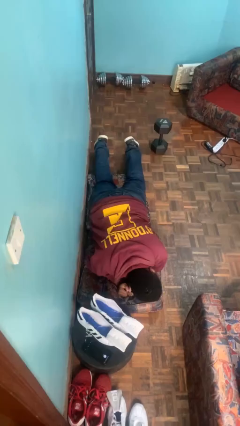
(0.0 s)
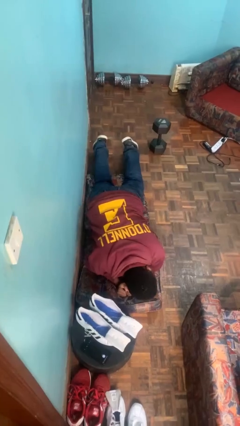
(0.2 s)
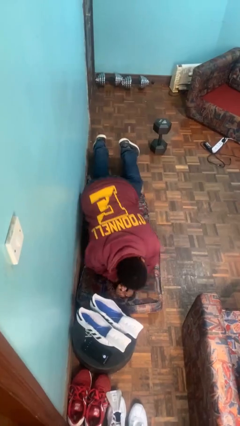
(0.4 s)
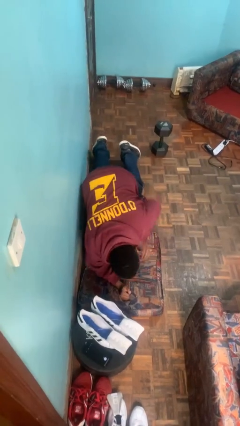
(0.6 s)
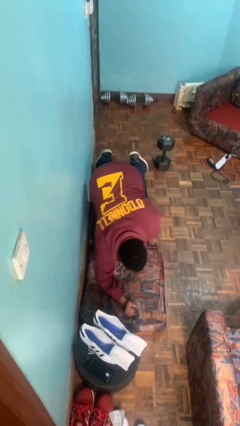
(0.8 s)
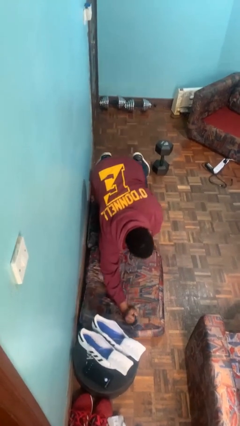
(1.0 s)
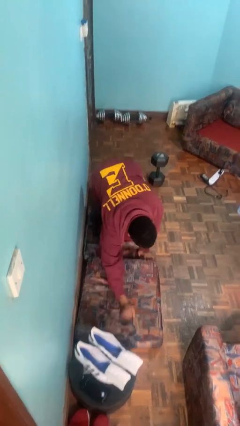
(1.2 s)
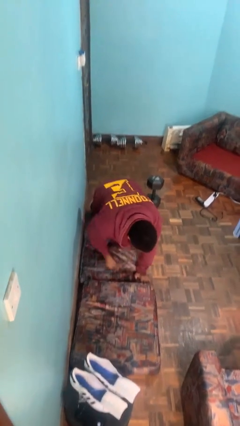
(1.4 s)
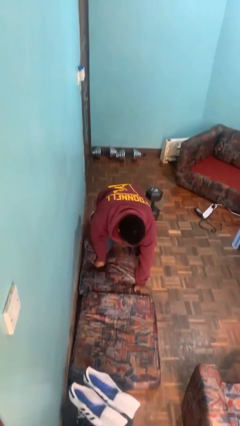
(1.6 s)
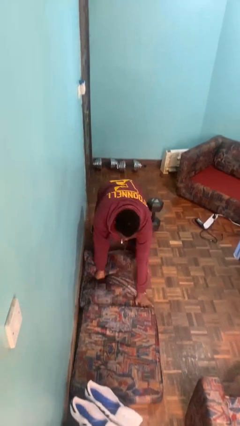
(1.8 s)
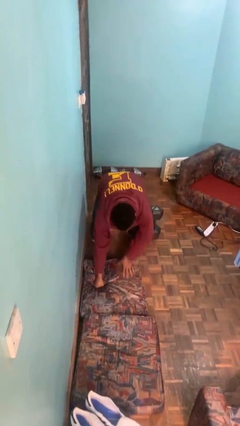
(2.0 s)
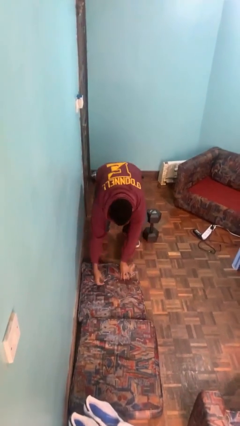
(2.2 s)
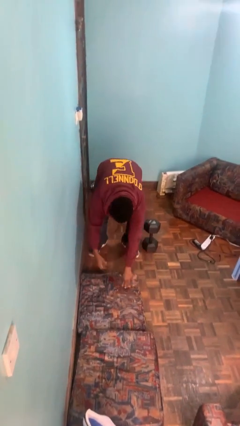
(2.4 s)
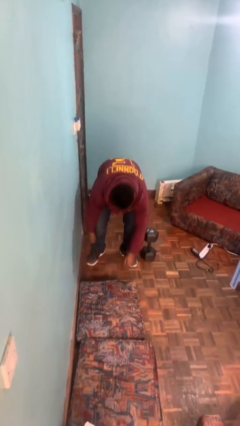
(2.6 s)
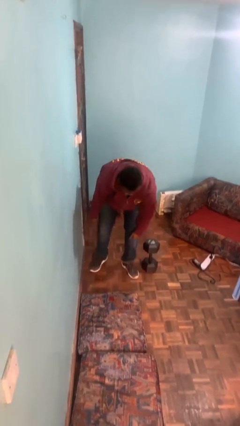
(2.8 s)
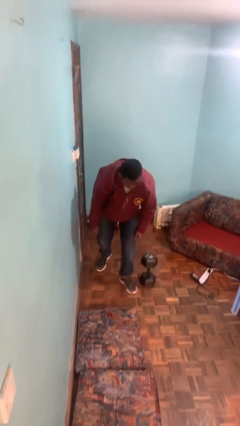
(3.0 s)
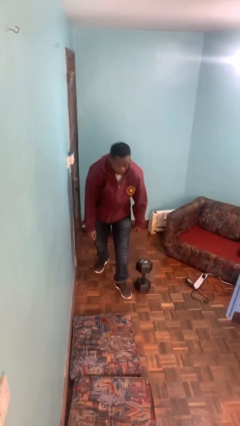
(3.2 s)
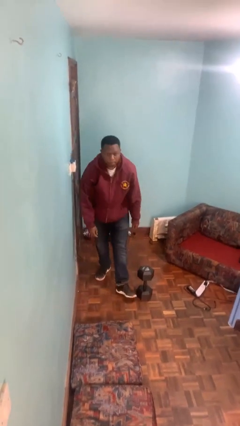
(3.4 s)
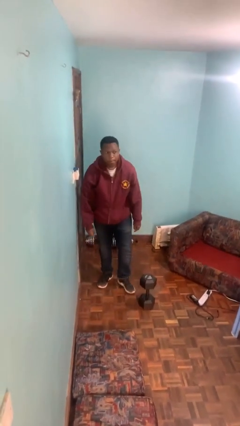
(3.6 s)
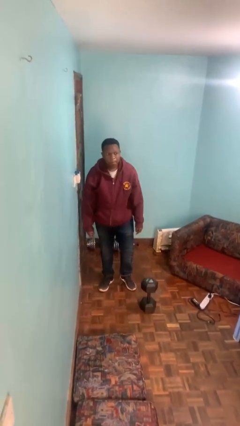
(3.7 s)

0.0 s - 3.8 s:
person stands up from floor

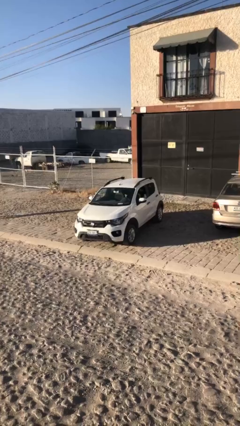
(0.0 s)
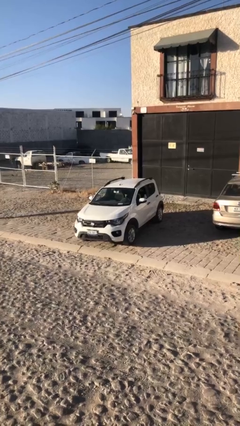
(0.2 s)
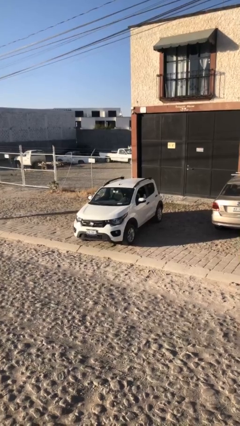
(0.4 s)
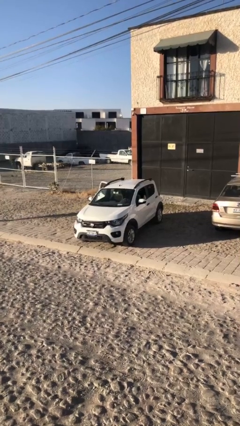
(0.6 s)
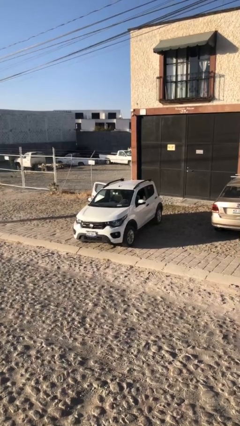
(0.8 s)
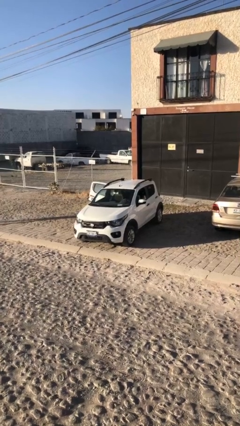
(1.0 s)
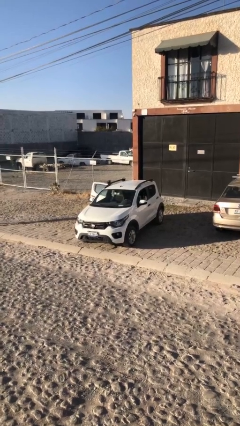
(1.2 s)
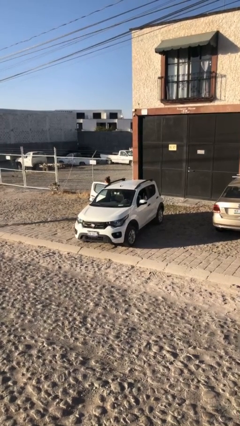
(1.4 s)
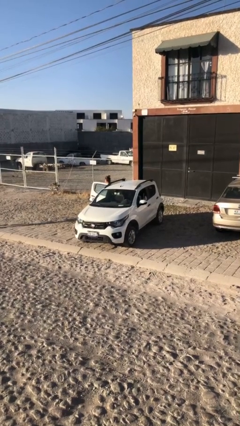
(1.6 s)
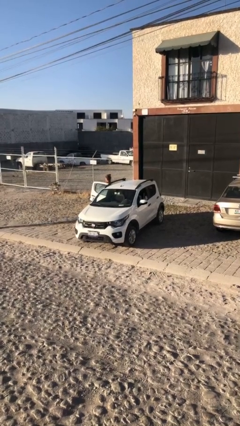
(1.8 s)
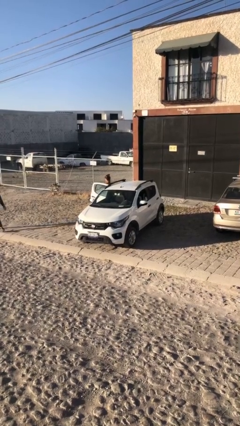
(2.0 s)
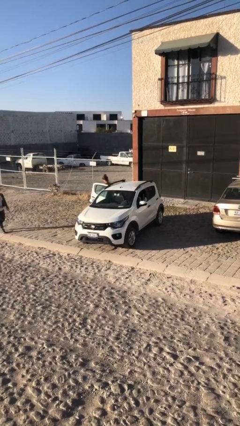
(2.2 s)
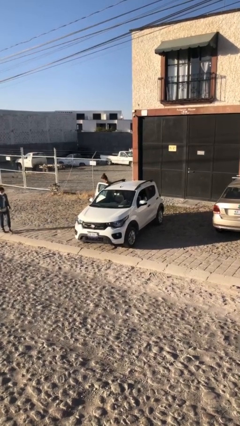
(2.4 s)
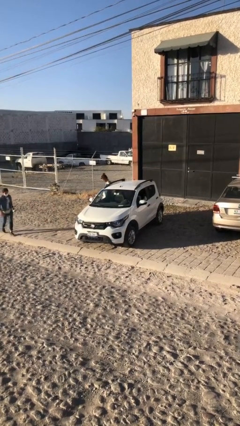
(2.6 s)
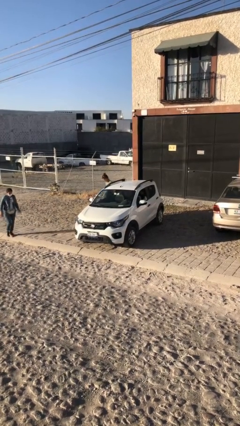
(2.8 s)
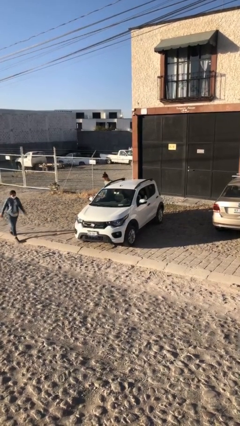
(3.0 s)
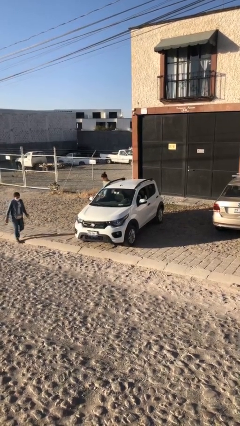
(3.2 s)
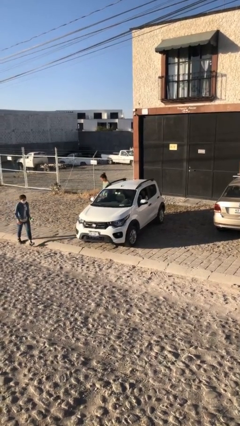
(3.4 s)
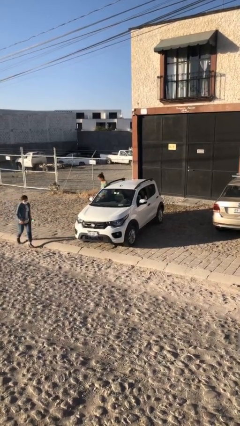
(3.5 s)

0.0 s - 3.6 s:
car drops off person

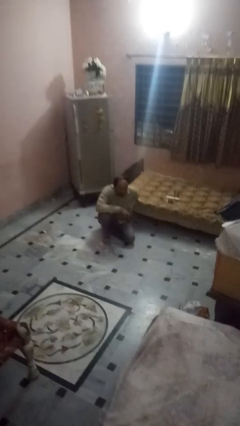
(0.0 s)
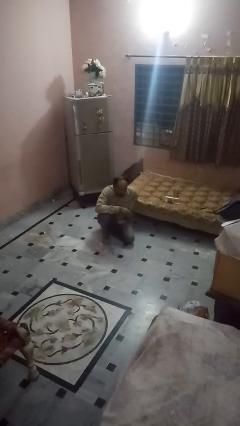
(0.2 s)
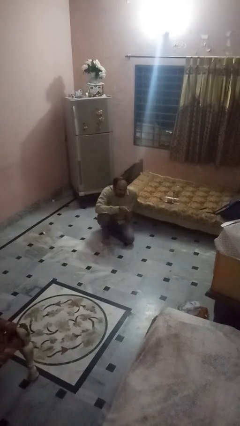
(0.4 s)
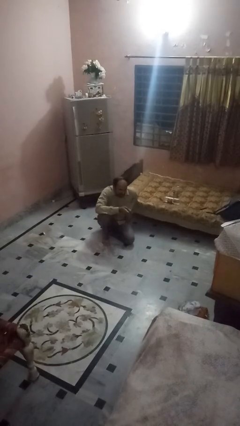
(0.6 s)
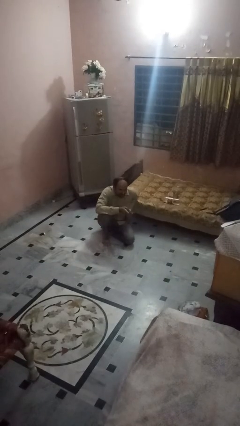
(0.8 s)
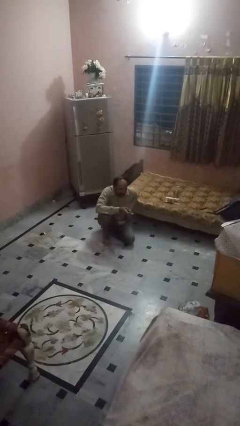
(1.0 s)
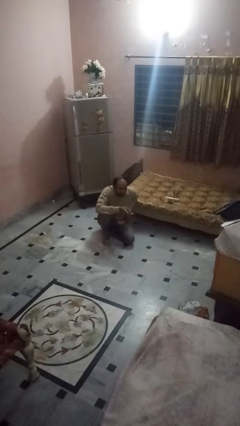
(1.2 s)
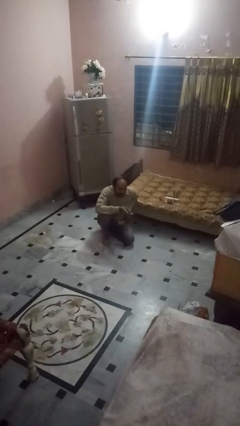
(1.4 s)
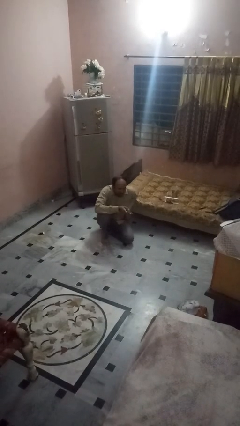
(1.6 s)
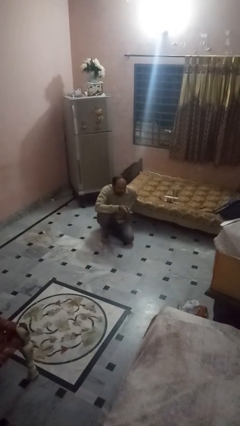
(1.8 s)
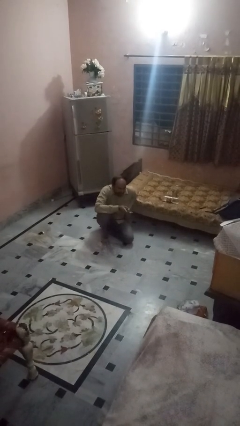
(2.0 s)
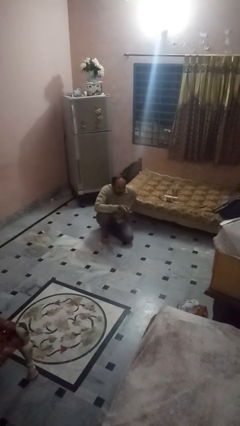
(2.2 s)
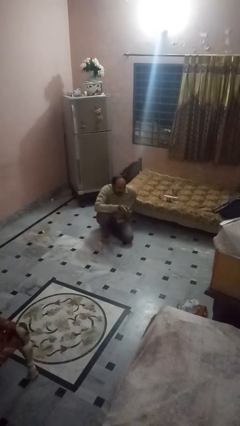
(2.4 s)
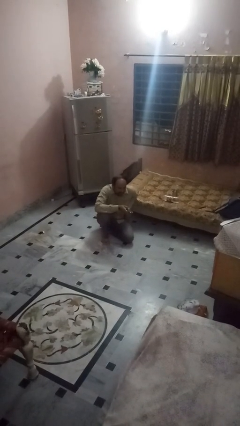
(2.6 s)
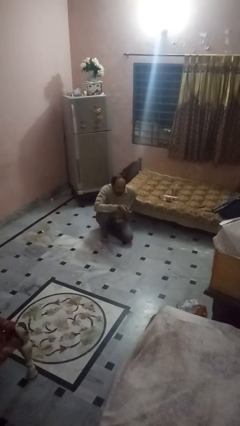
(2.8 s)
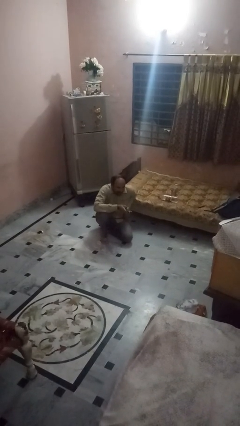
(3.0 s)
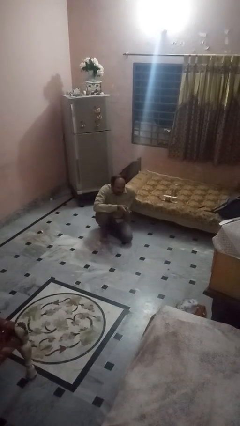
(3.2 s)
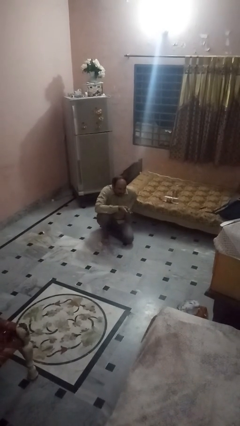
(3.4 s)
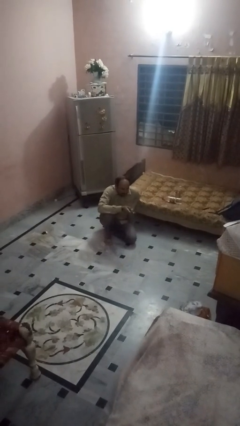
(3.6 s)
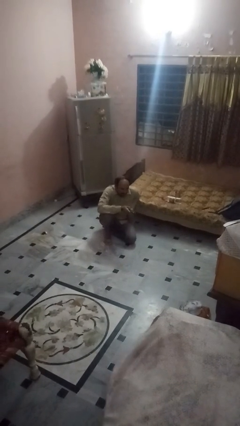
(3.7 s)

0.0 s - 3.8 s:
person uses television remote

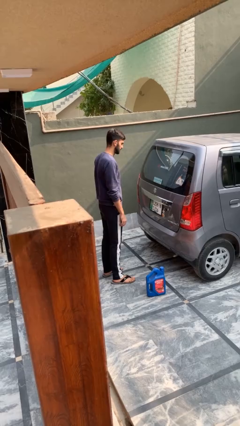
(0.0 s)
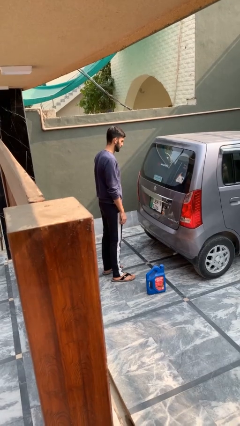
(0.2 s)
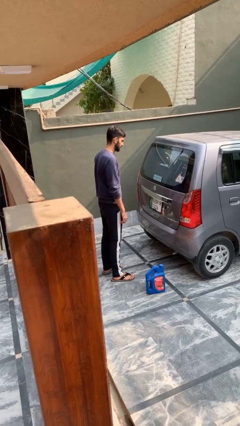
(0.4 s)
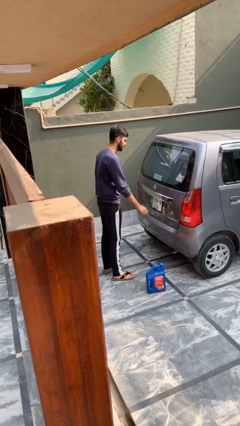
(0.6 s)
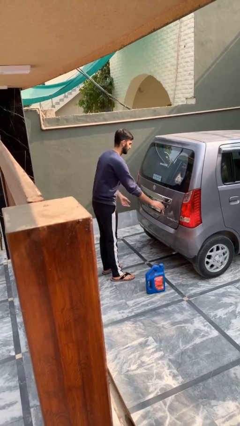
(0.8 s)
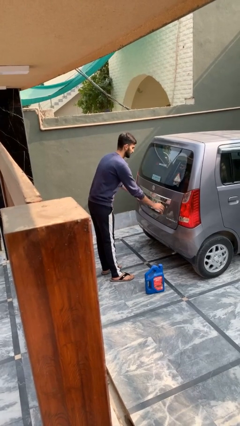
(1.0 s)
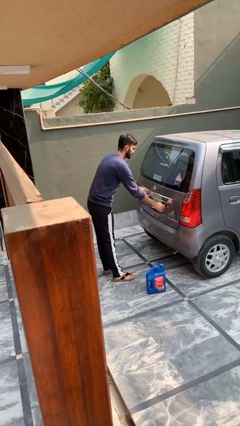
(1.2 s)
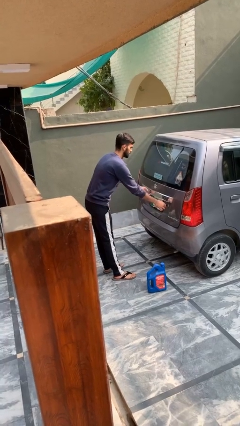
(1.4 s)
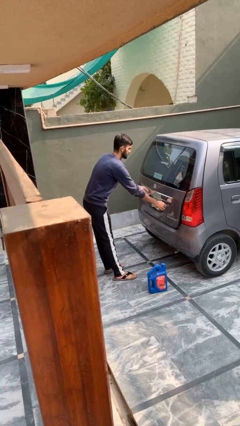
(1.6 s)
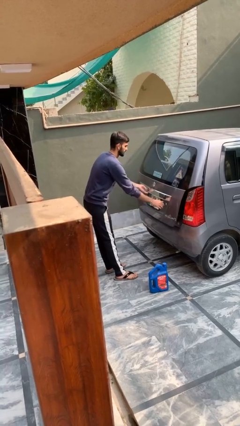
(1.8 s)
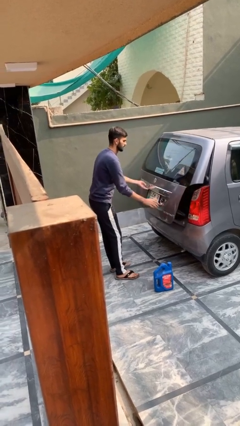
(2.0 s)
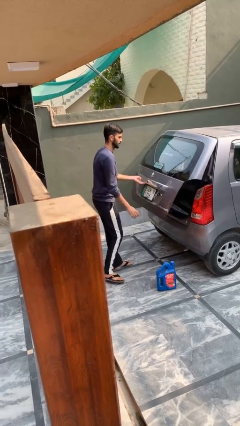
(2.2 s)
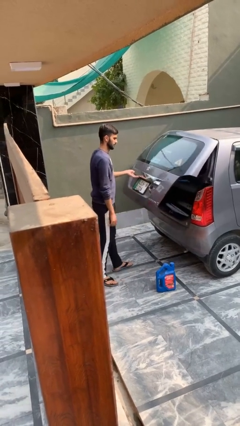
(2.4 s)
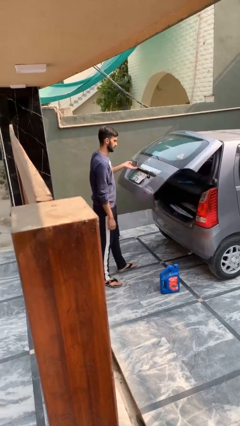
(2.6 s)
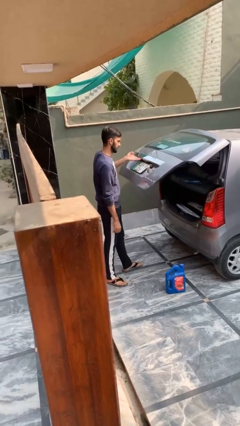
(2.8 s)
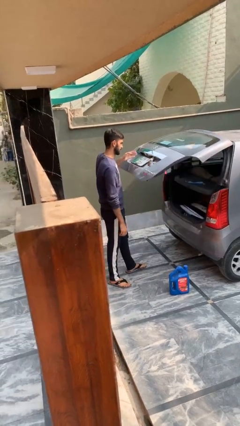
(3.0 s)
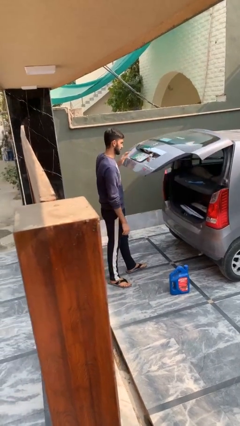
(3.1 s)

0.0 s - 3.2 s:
person opens car trunk

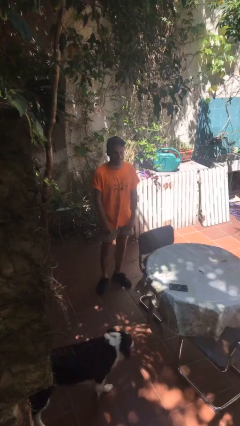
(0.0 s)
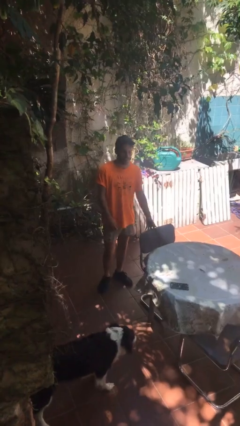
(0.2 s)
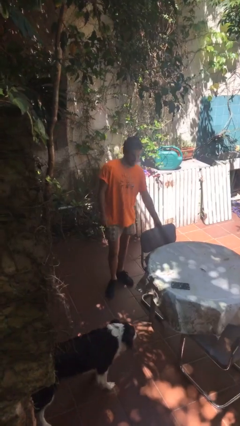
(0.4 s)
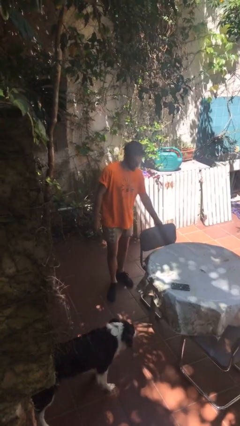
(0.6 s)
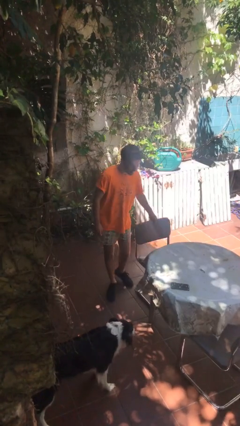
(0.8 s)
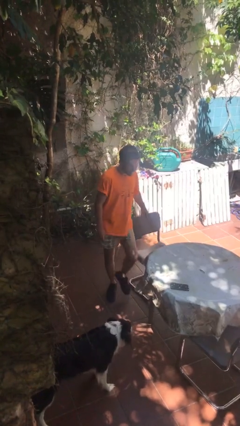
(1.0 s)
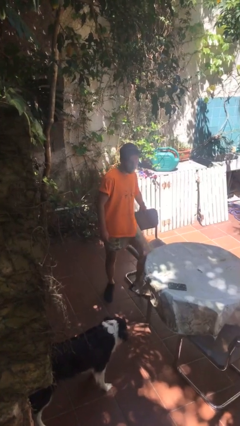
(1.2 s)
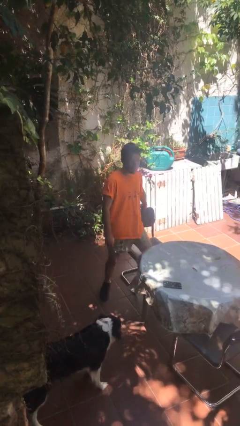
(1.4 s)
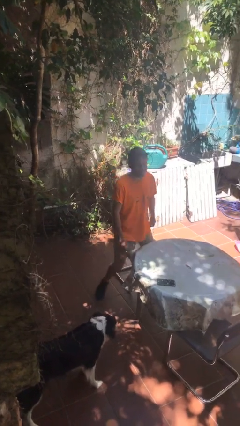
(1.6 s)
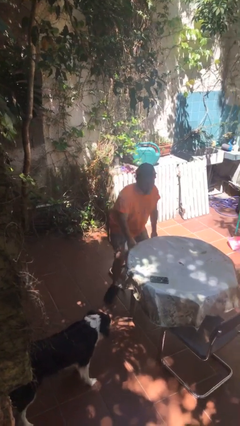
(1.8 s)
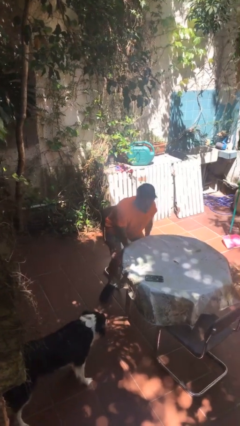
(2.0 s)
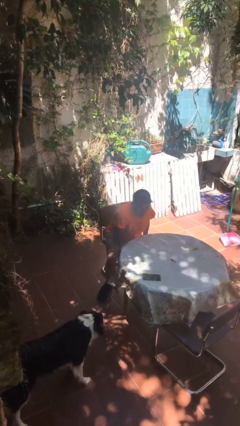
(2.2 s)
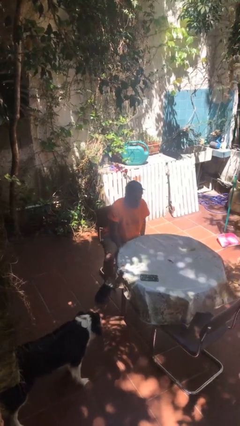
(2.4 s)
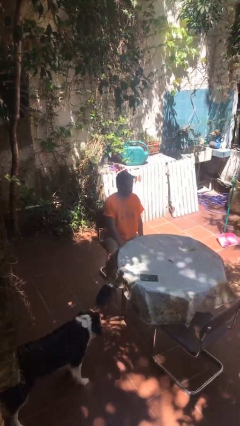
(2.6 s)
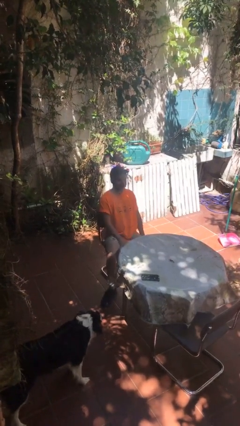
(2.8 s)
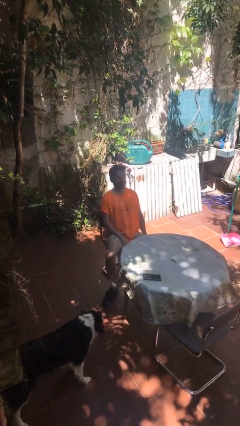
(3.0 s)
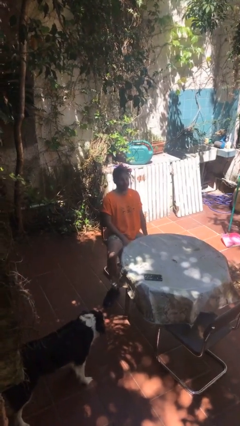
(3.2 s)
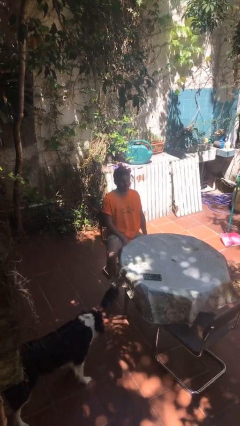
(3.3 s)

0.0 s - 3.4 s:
person sits down
